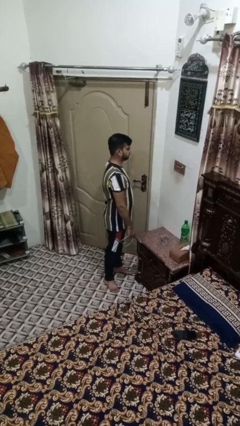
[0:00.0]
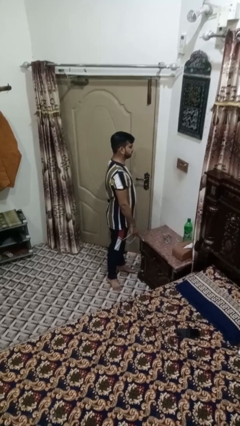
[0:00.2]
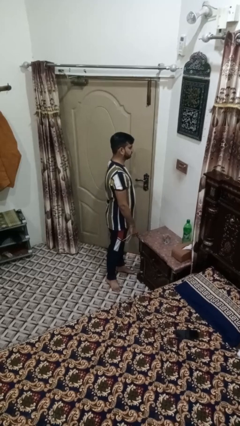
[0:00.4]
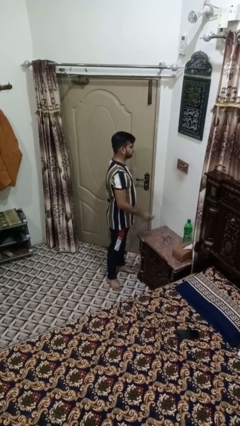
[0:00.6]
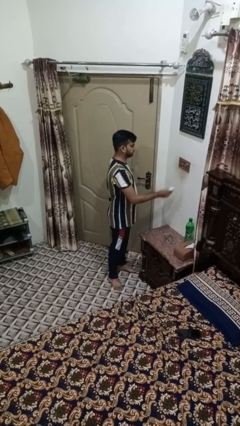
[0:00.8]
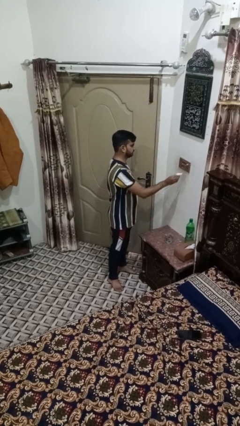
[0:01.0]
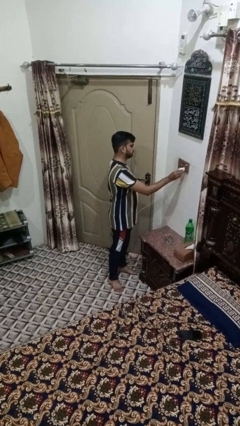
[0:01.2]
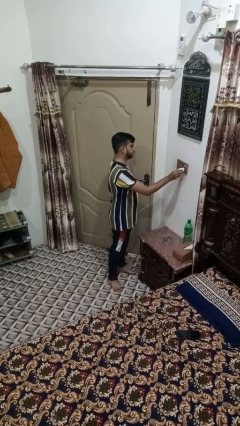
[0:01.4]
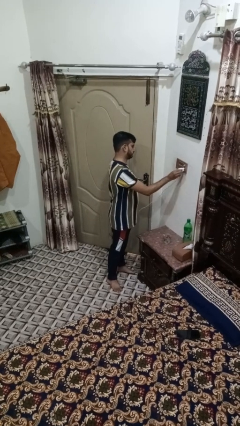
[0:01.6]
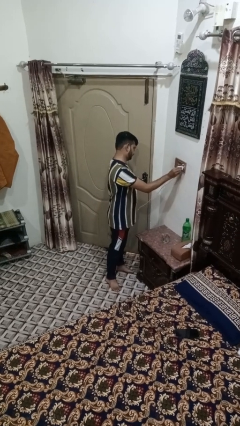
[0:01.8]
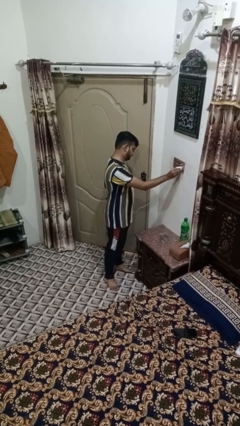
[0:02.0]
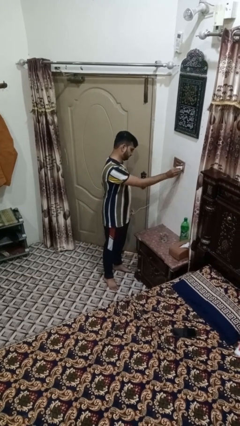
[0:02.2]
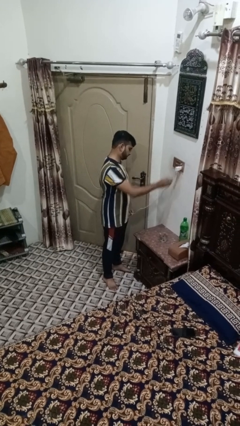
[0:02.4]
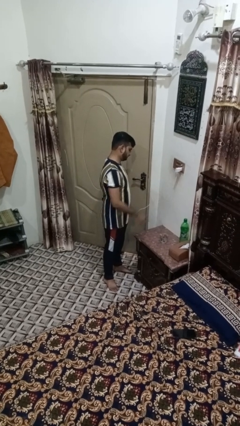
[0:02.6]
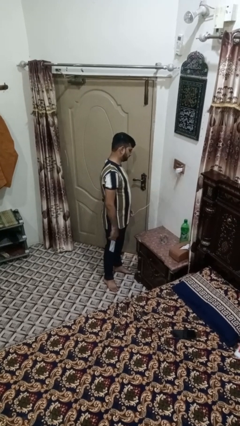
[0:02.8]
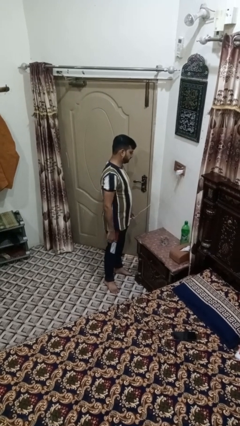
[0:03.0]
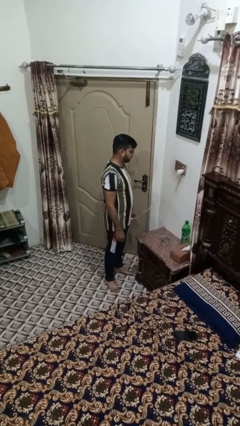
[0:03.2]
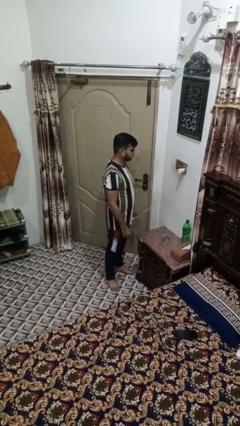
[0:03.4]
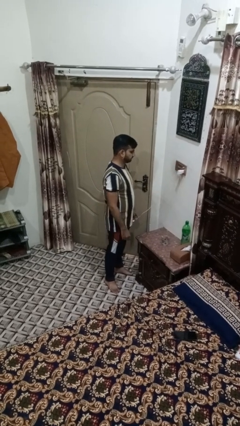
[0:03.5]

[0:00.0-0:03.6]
person plugs into electrical socket

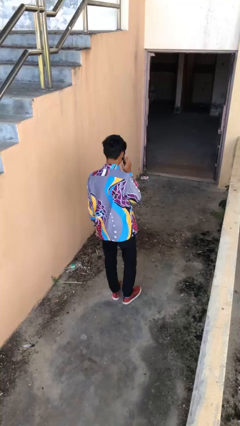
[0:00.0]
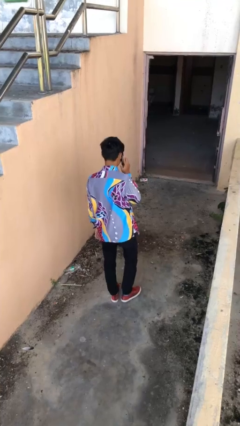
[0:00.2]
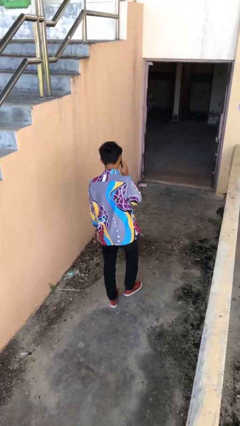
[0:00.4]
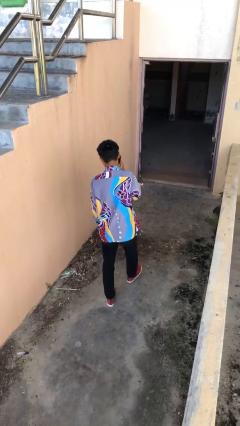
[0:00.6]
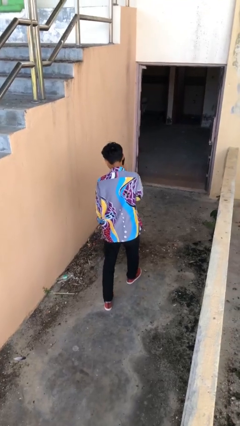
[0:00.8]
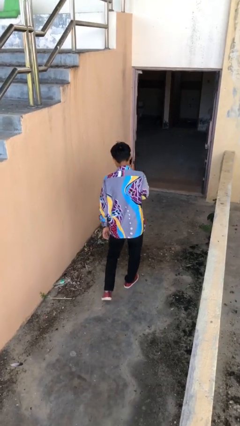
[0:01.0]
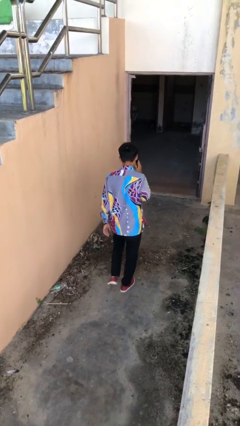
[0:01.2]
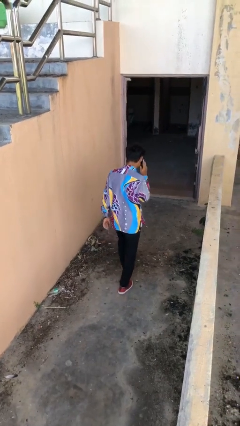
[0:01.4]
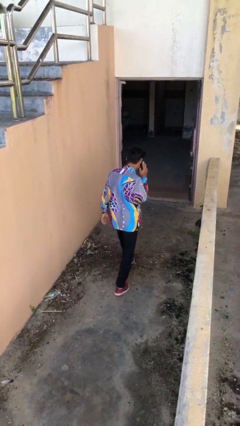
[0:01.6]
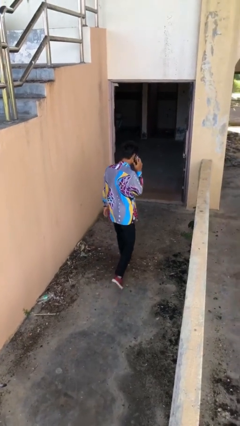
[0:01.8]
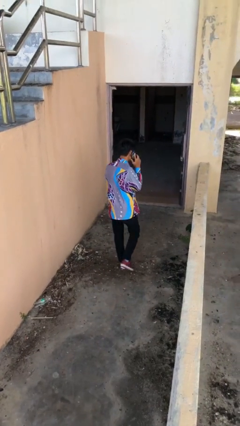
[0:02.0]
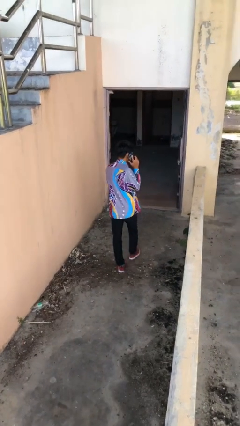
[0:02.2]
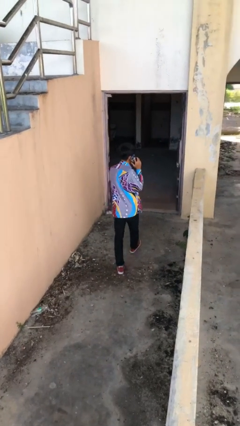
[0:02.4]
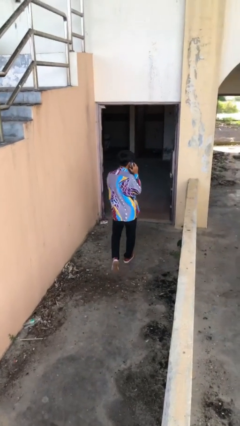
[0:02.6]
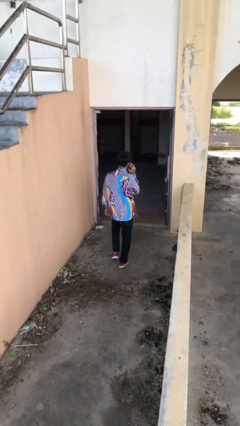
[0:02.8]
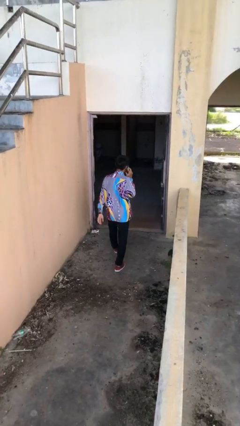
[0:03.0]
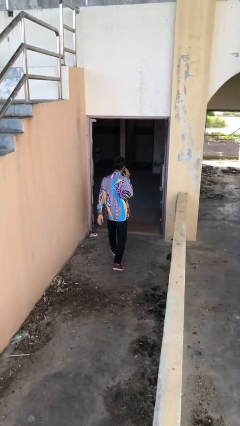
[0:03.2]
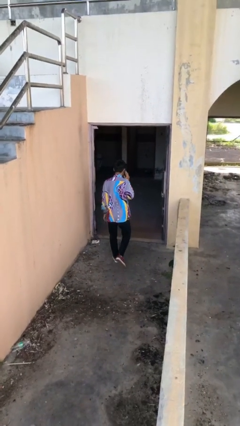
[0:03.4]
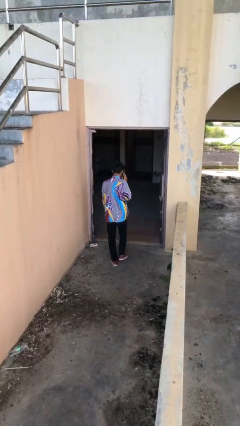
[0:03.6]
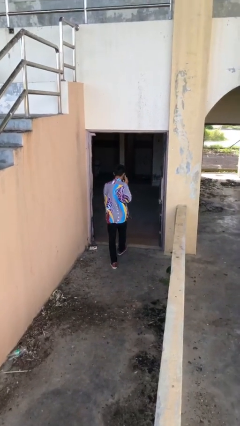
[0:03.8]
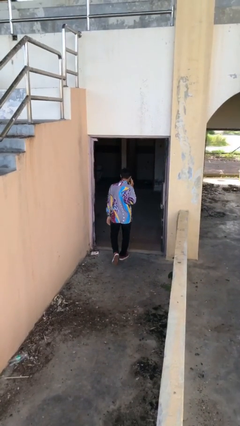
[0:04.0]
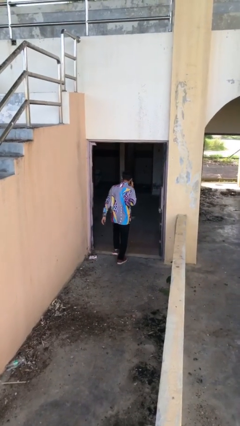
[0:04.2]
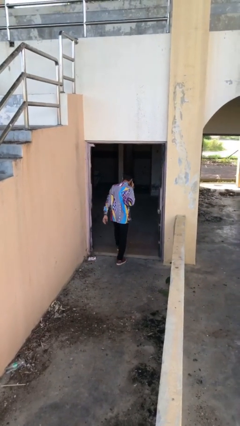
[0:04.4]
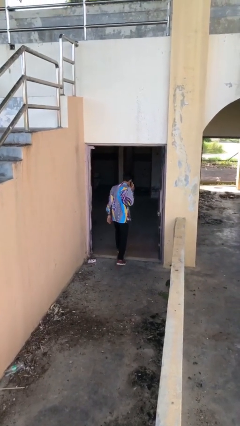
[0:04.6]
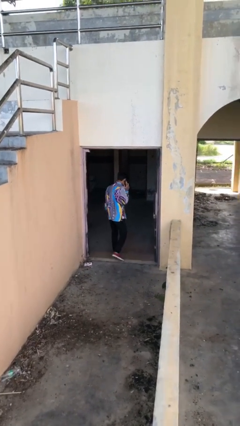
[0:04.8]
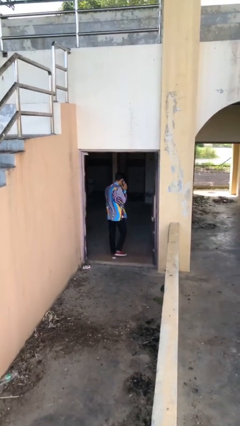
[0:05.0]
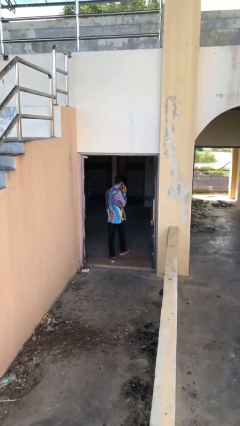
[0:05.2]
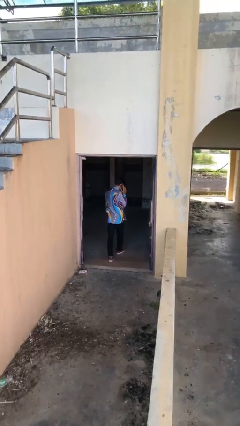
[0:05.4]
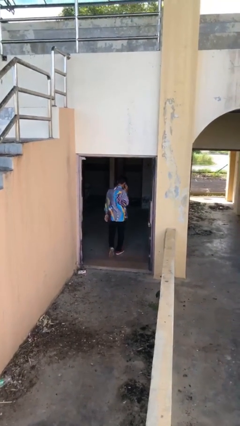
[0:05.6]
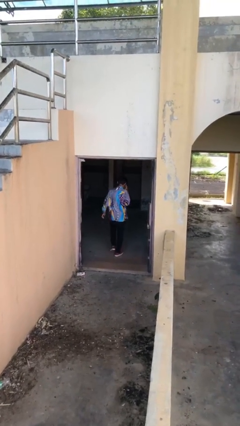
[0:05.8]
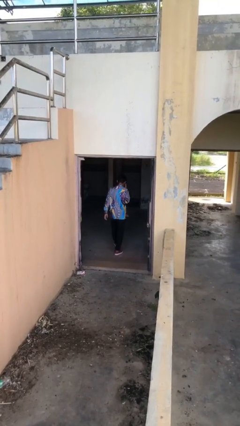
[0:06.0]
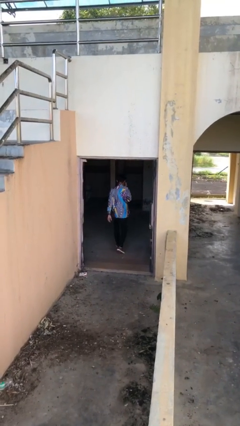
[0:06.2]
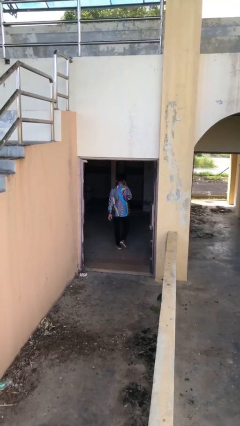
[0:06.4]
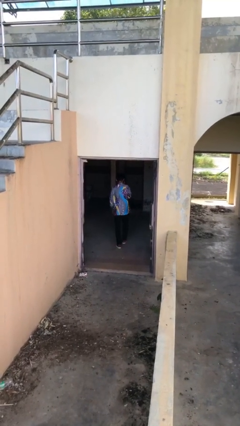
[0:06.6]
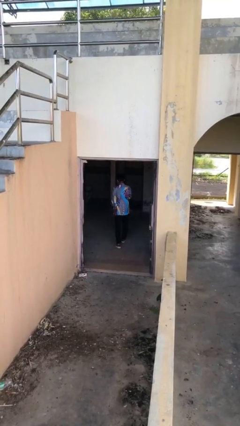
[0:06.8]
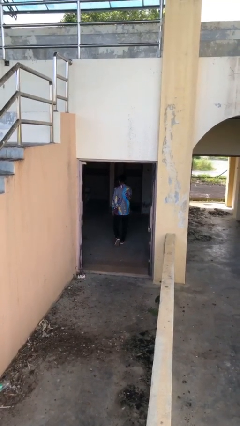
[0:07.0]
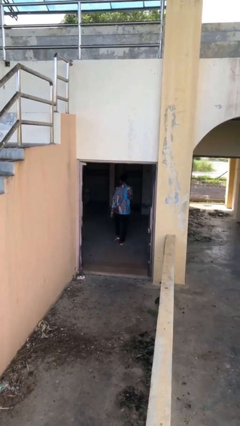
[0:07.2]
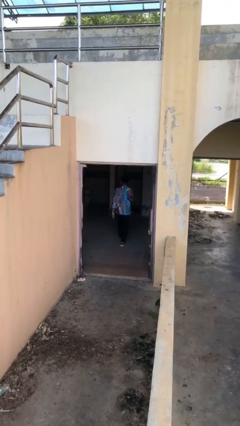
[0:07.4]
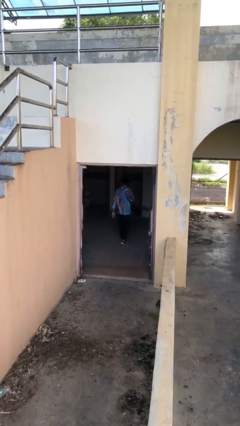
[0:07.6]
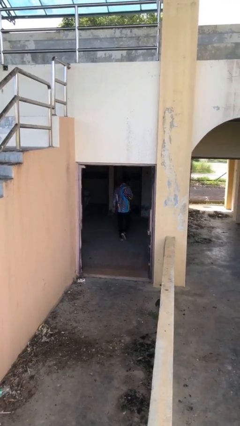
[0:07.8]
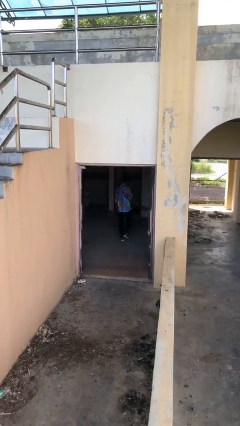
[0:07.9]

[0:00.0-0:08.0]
person exits scene through structure

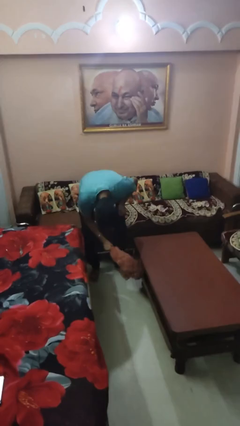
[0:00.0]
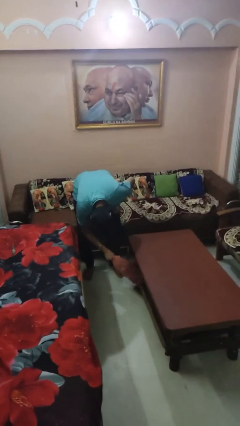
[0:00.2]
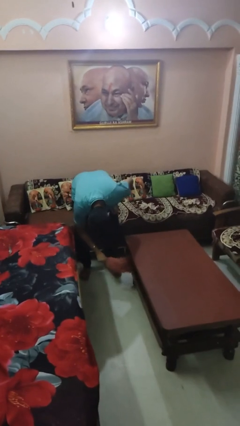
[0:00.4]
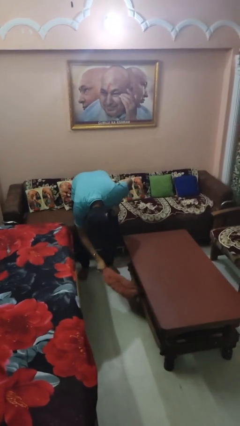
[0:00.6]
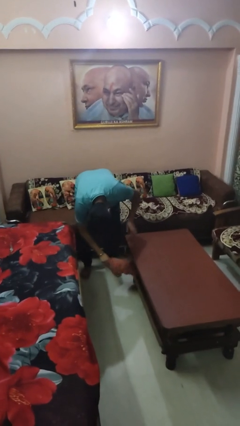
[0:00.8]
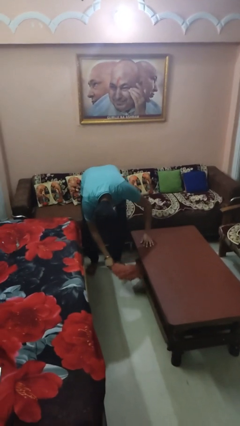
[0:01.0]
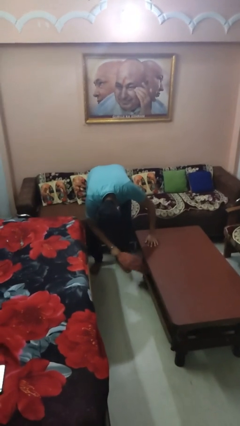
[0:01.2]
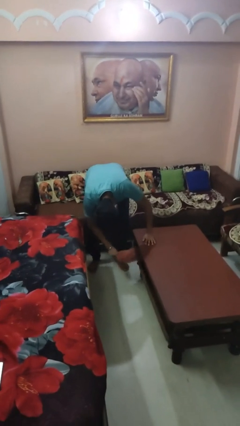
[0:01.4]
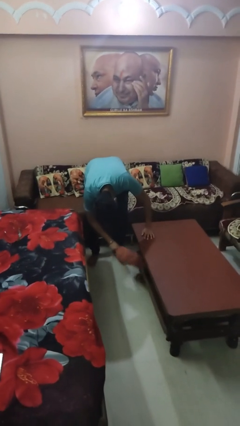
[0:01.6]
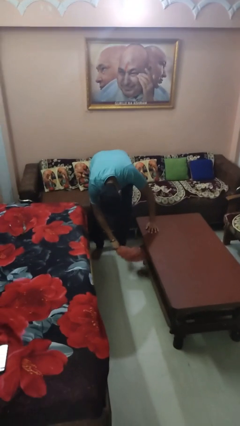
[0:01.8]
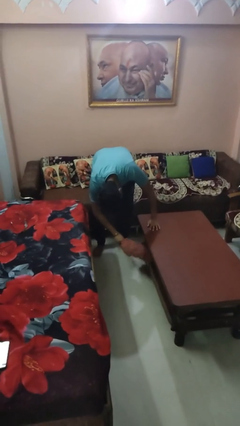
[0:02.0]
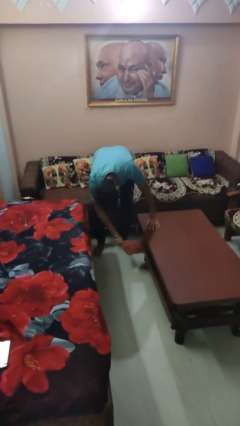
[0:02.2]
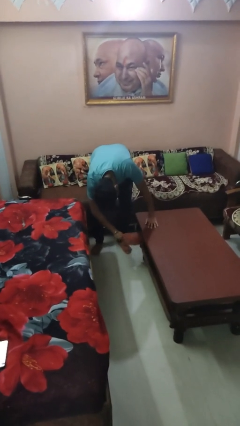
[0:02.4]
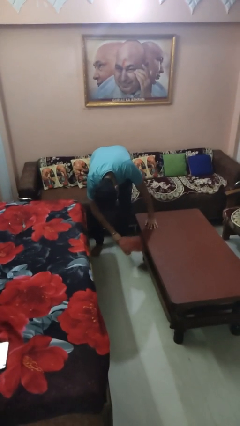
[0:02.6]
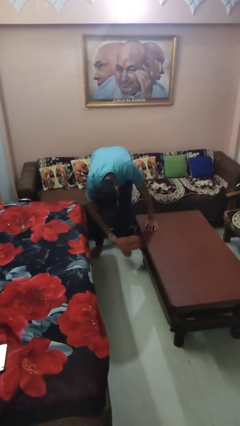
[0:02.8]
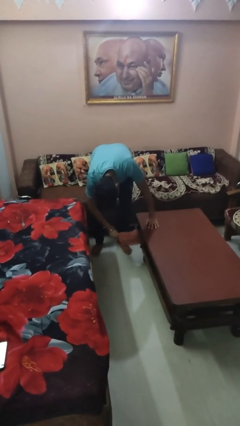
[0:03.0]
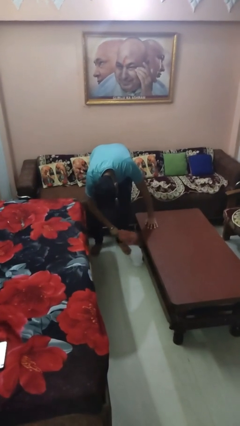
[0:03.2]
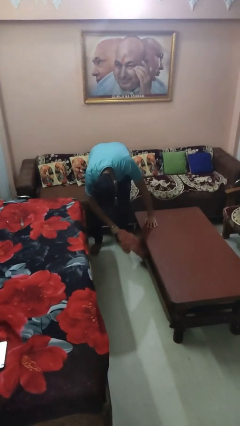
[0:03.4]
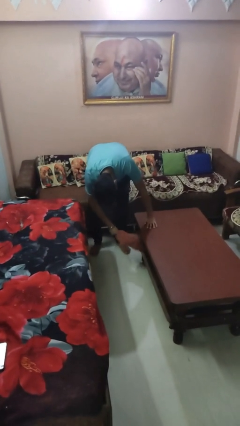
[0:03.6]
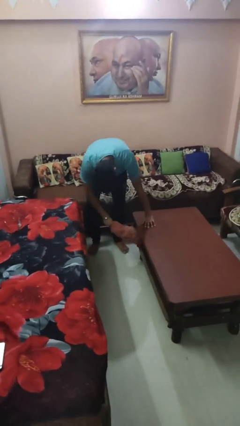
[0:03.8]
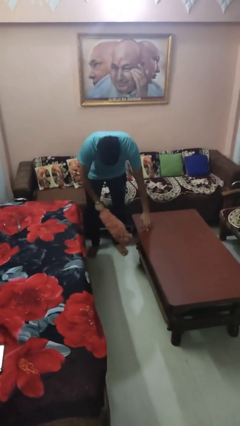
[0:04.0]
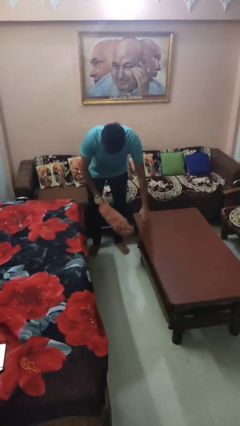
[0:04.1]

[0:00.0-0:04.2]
person dusts furniture

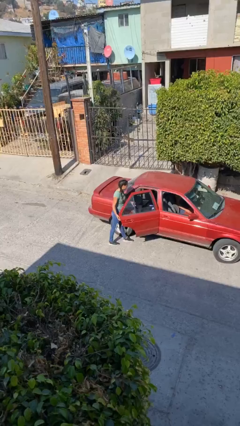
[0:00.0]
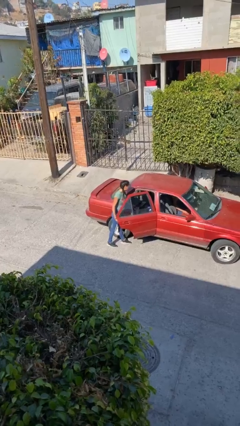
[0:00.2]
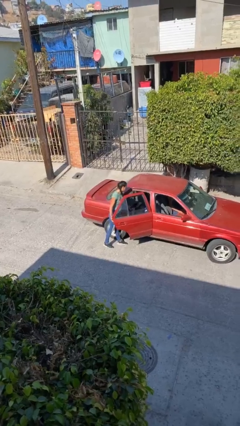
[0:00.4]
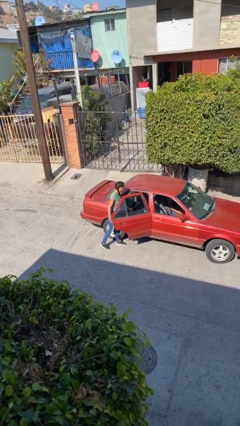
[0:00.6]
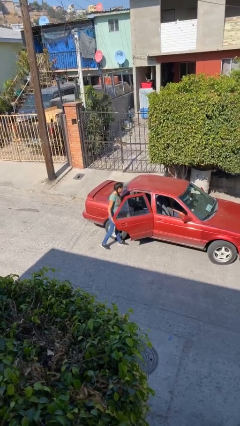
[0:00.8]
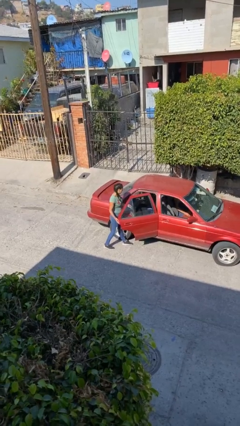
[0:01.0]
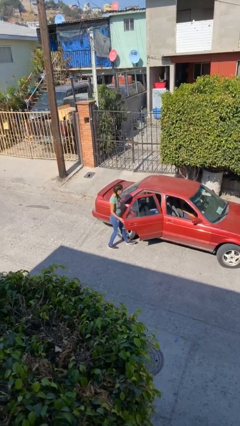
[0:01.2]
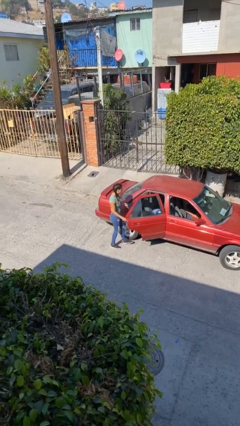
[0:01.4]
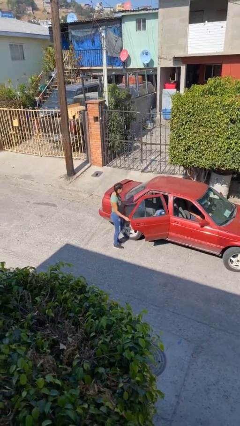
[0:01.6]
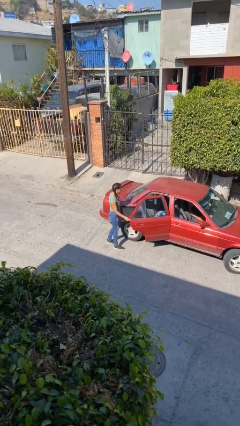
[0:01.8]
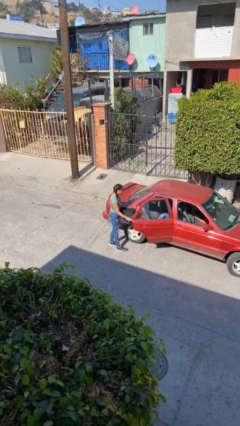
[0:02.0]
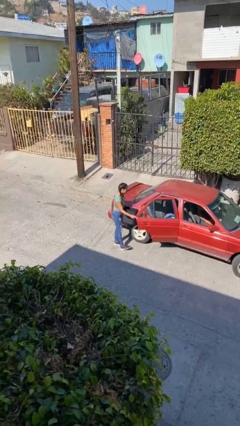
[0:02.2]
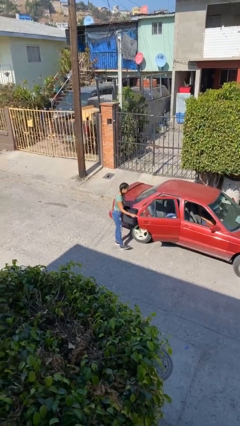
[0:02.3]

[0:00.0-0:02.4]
person unloads car
